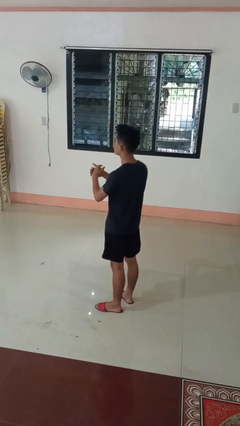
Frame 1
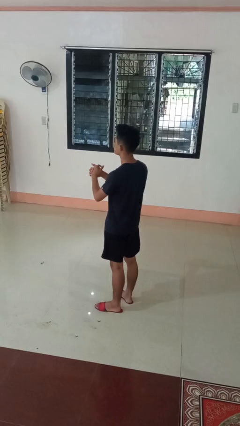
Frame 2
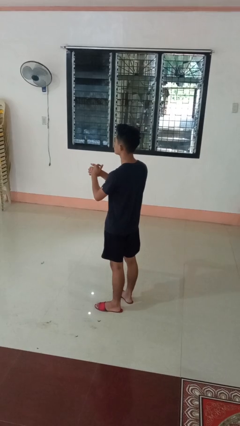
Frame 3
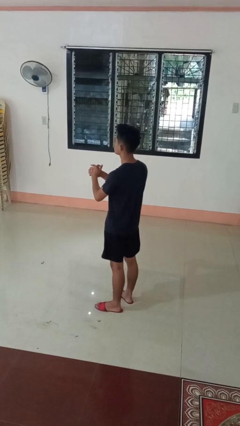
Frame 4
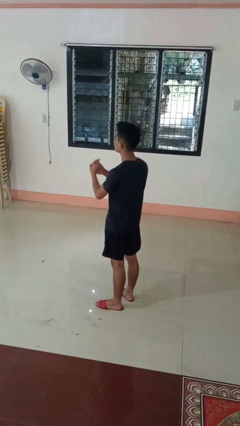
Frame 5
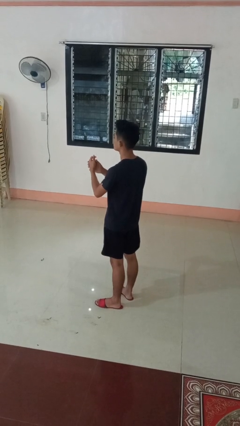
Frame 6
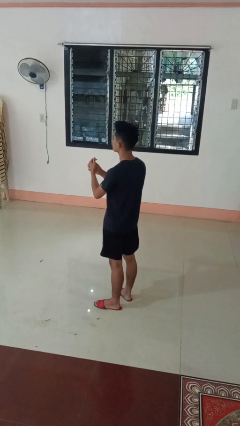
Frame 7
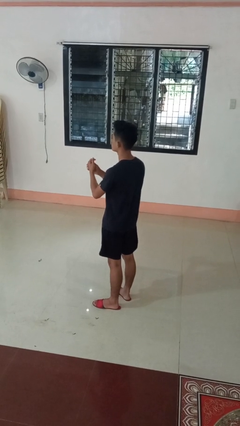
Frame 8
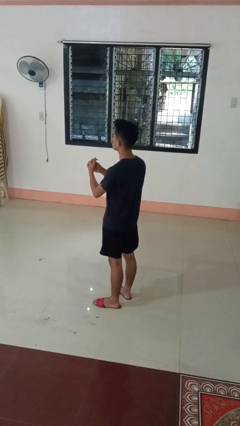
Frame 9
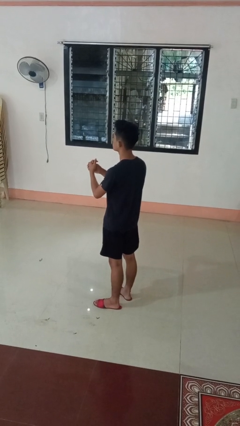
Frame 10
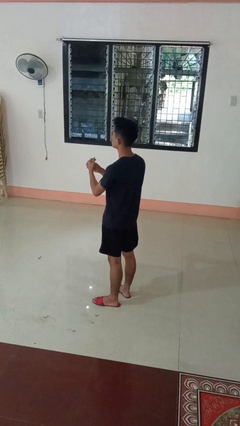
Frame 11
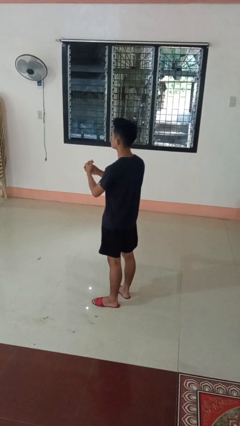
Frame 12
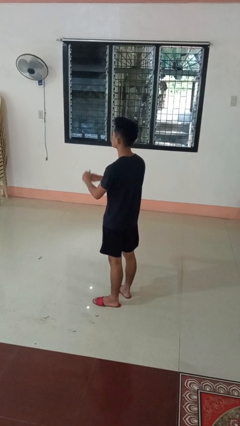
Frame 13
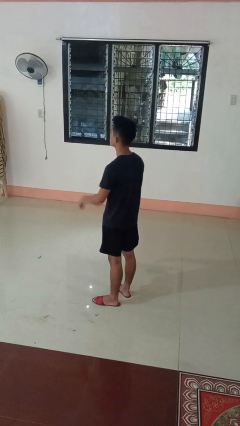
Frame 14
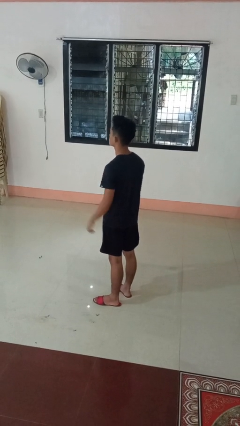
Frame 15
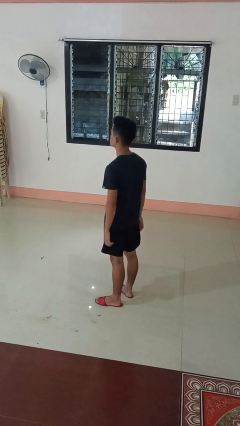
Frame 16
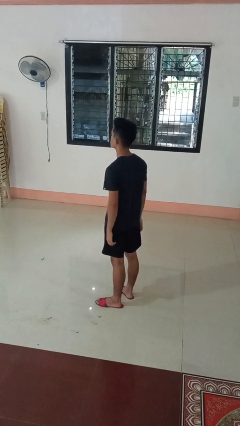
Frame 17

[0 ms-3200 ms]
person cracks knuckles

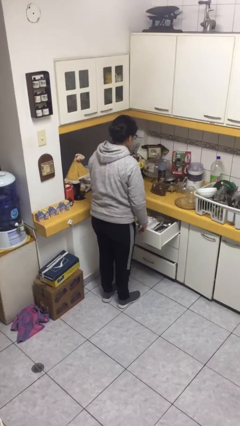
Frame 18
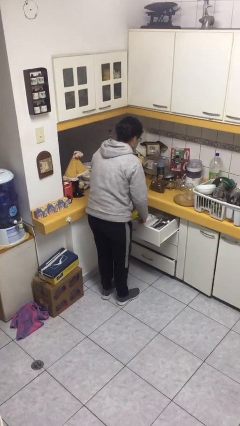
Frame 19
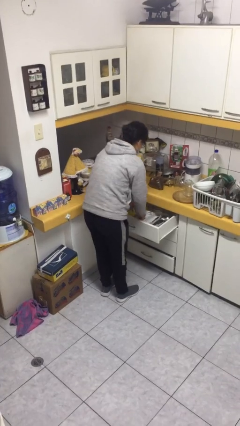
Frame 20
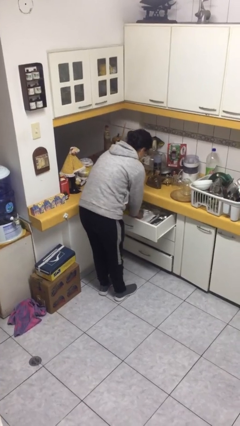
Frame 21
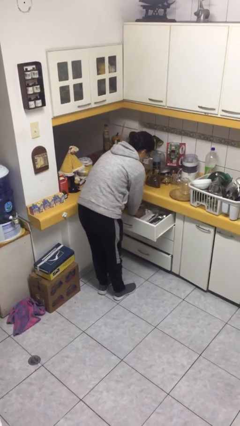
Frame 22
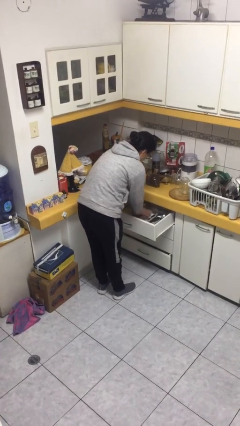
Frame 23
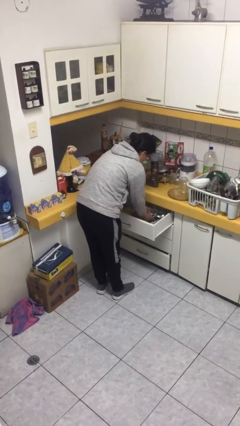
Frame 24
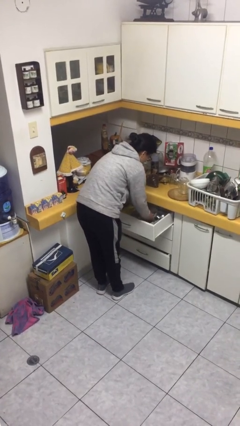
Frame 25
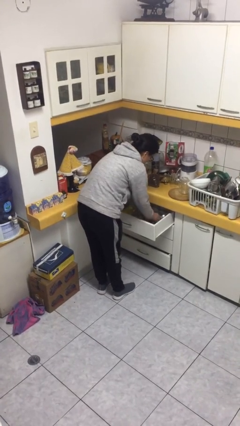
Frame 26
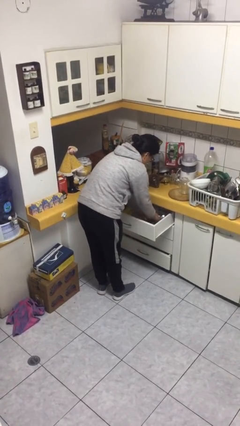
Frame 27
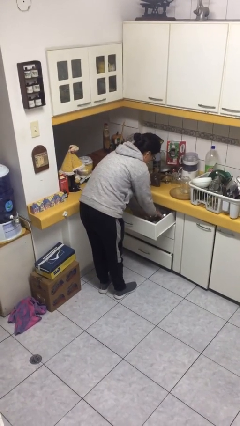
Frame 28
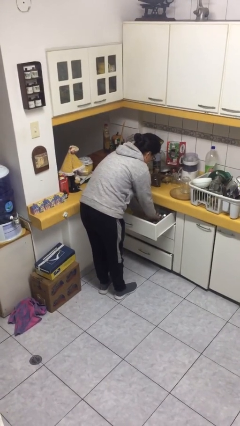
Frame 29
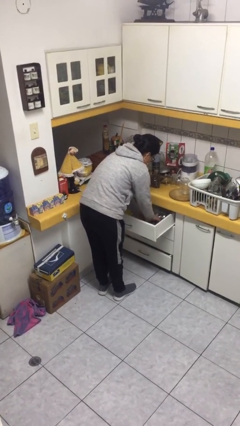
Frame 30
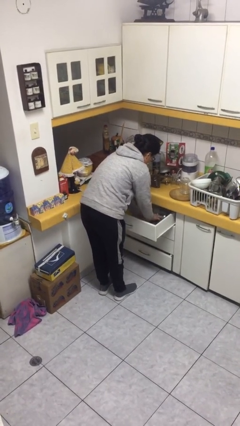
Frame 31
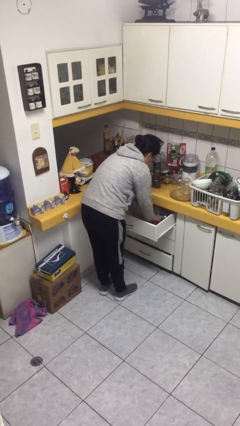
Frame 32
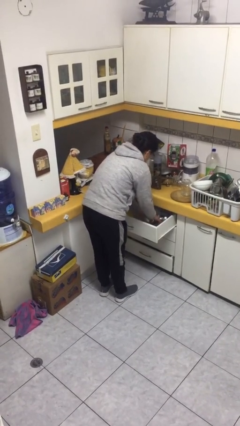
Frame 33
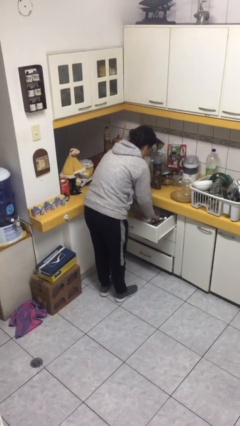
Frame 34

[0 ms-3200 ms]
person searches in kitchen drawer

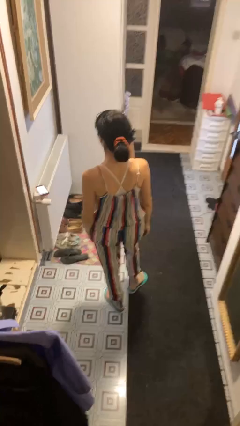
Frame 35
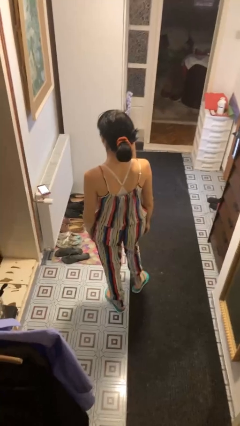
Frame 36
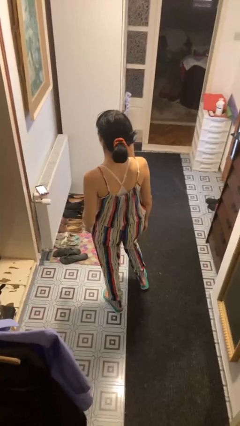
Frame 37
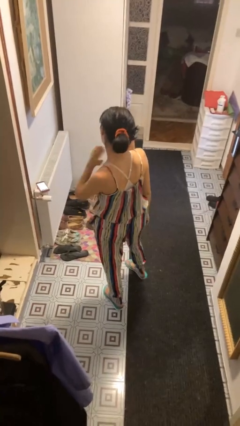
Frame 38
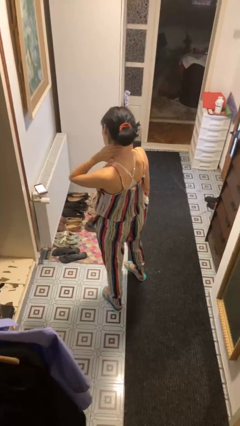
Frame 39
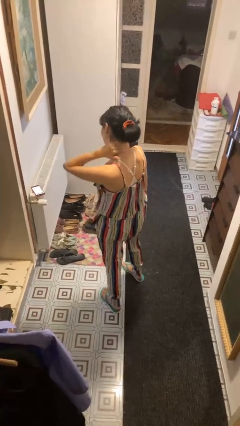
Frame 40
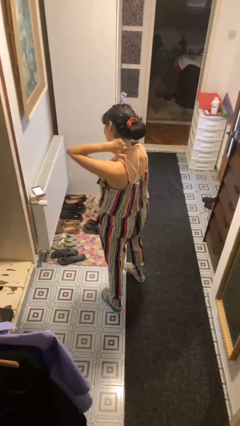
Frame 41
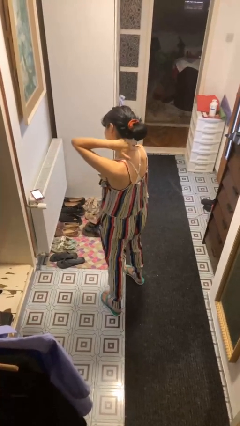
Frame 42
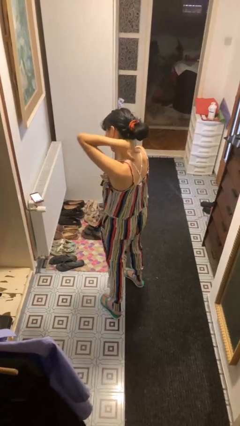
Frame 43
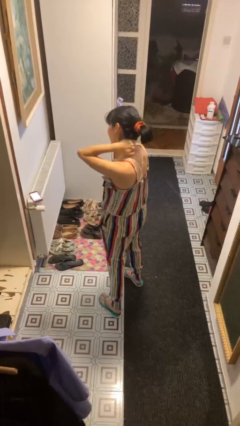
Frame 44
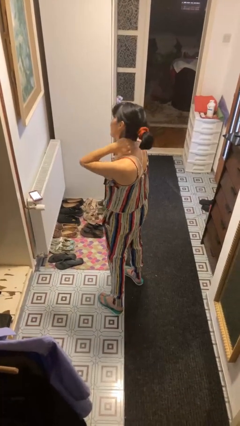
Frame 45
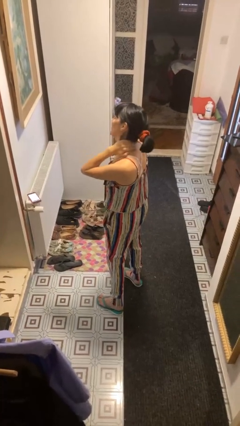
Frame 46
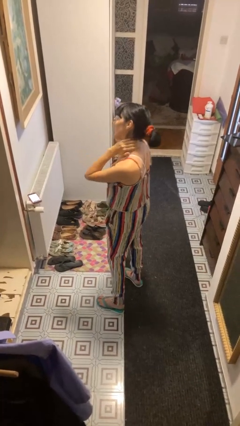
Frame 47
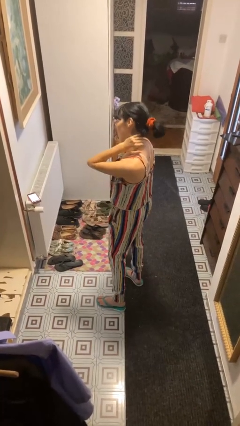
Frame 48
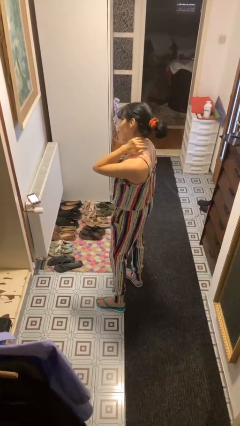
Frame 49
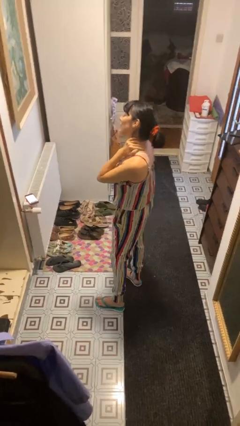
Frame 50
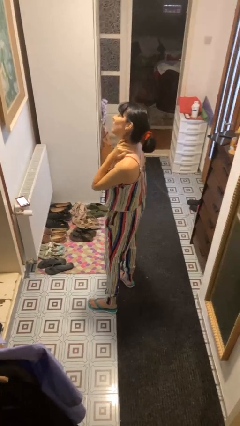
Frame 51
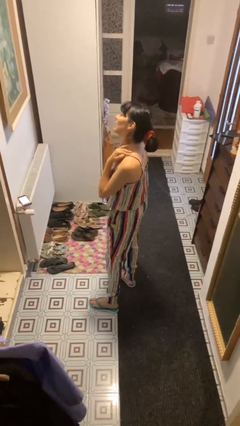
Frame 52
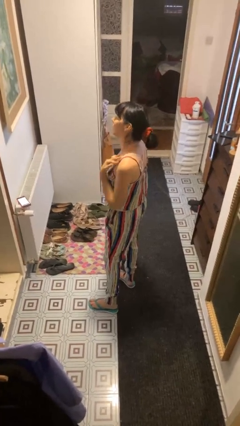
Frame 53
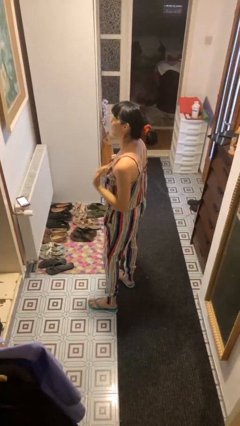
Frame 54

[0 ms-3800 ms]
person rubs neck

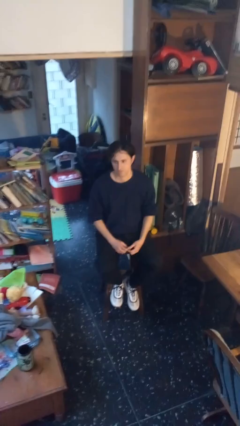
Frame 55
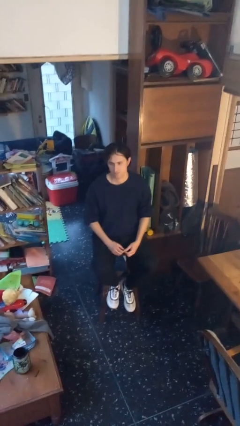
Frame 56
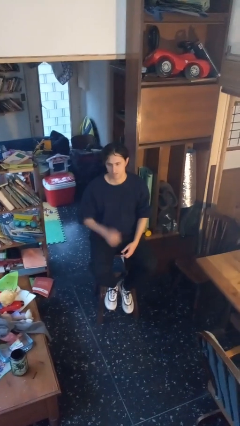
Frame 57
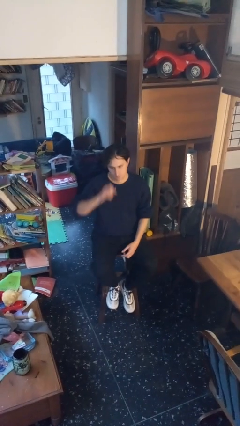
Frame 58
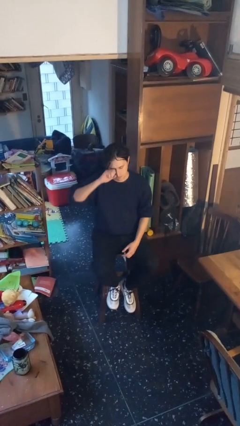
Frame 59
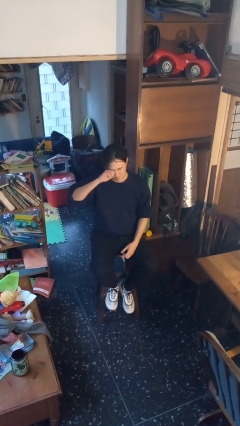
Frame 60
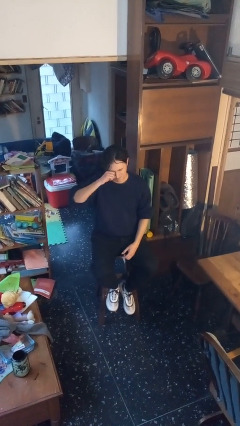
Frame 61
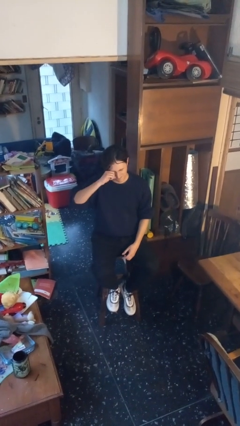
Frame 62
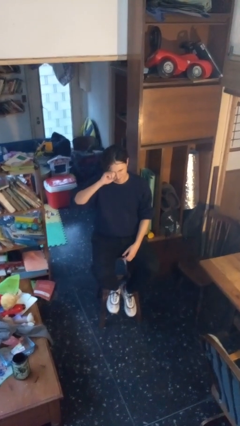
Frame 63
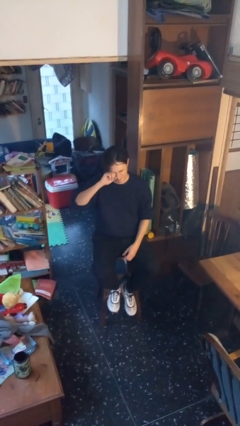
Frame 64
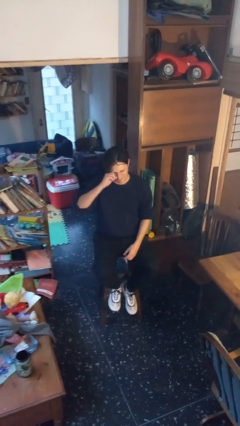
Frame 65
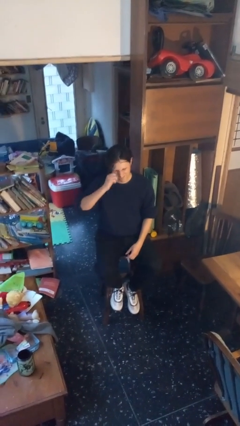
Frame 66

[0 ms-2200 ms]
person rubs eyes

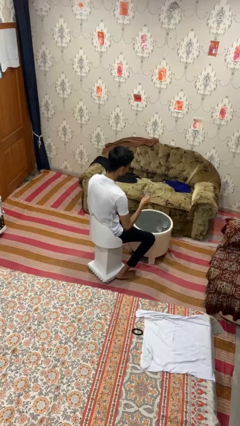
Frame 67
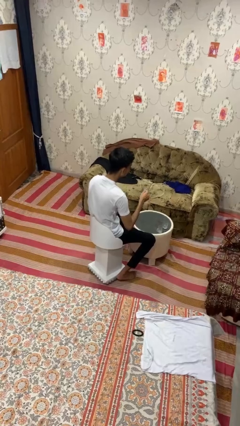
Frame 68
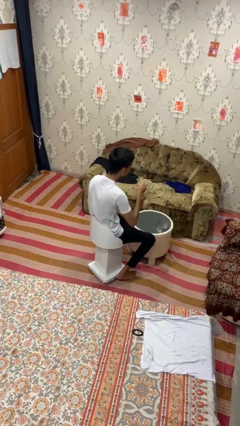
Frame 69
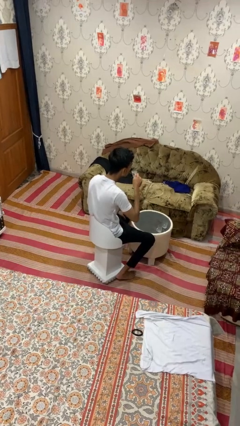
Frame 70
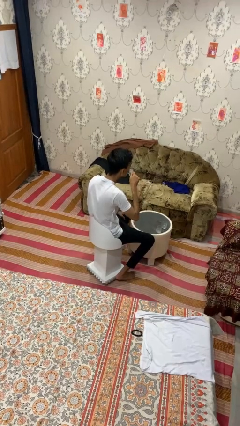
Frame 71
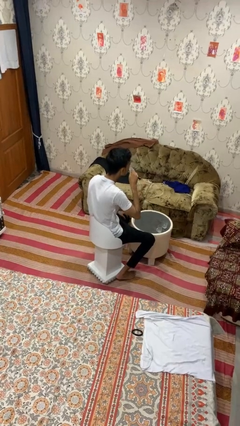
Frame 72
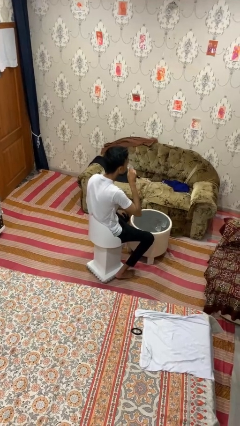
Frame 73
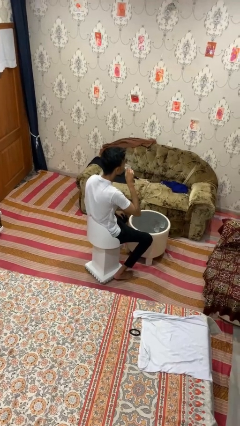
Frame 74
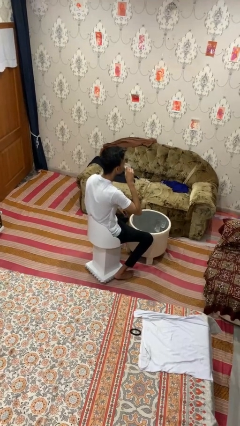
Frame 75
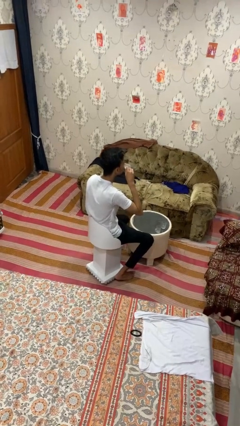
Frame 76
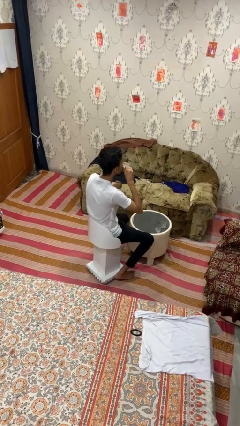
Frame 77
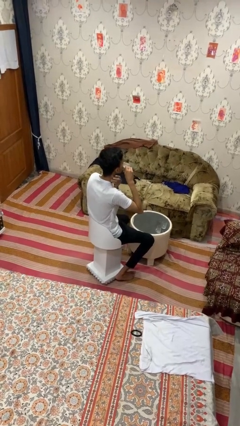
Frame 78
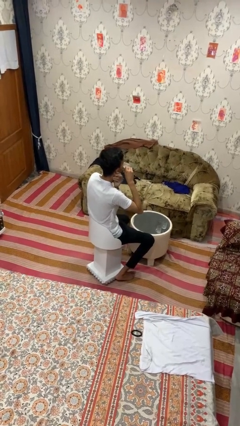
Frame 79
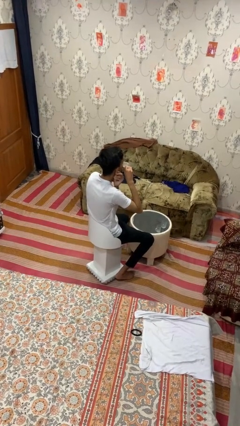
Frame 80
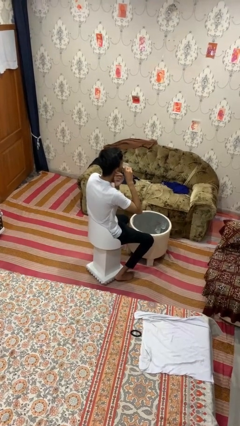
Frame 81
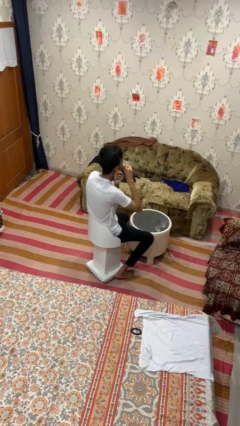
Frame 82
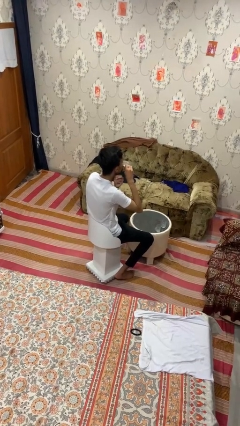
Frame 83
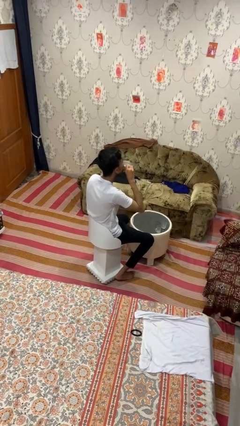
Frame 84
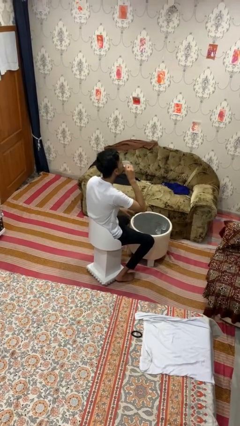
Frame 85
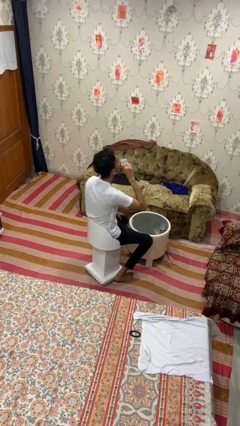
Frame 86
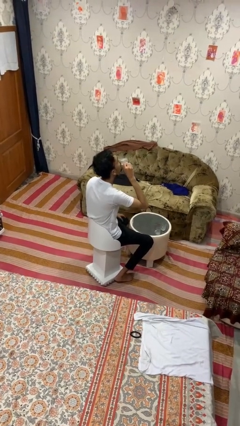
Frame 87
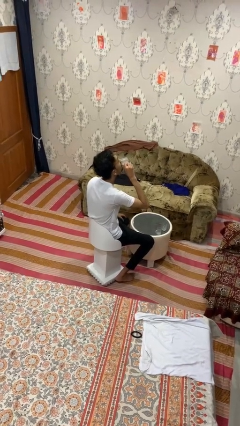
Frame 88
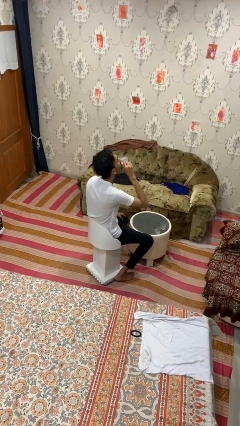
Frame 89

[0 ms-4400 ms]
person drinks from shotglass

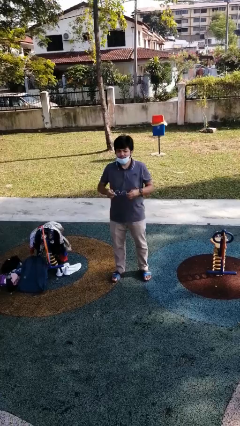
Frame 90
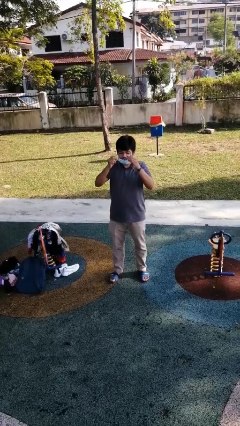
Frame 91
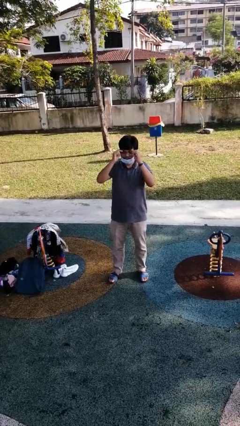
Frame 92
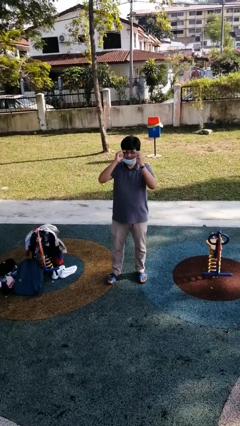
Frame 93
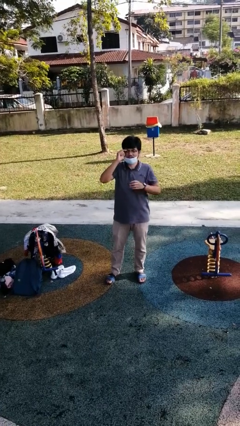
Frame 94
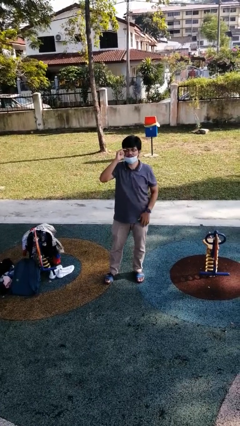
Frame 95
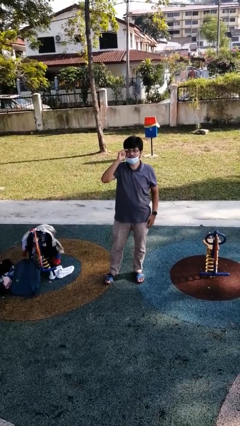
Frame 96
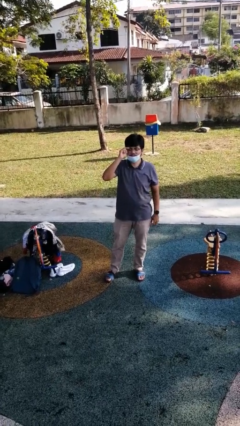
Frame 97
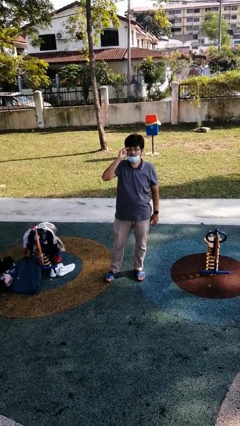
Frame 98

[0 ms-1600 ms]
person puts on glasses
